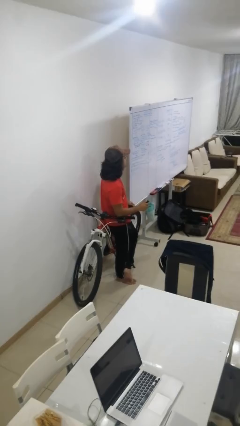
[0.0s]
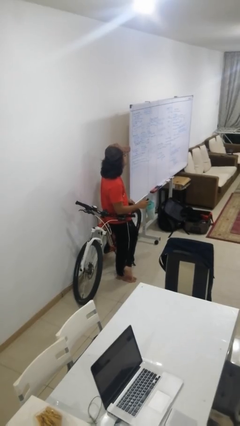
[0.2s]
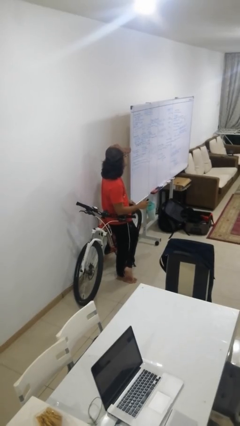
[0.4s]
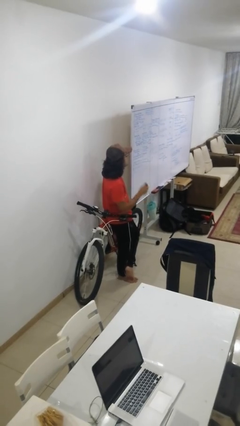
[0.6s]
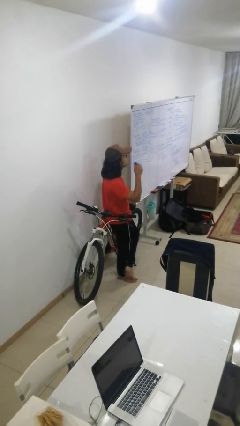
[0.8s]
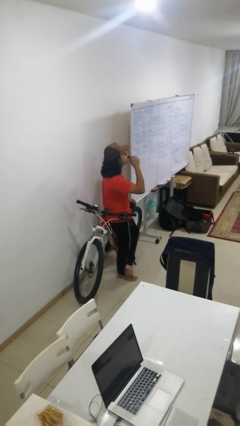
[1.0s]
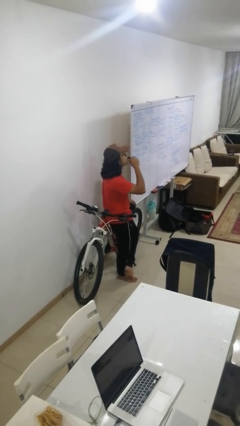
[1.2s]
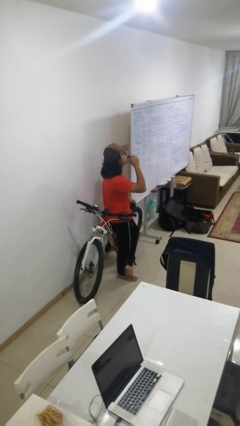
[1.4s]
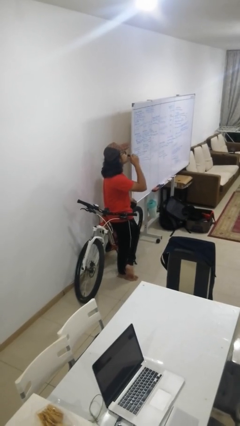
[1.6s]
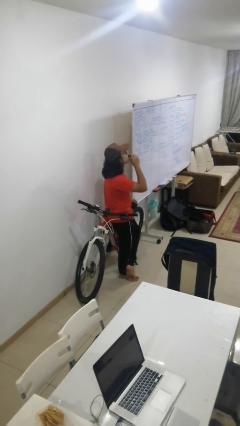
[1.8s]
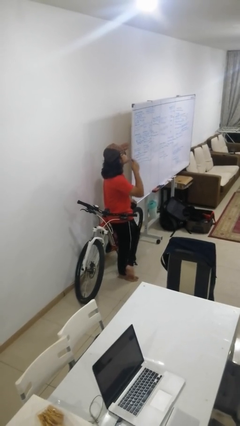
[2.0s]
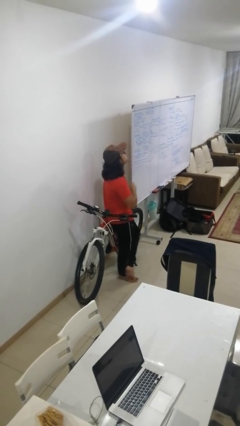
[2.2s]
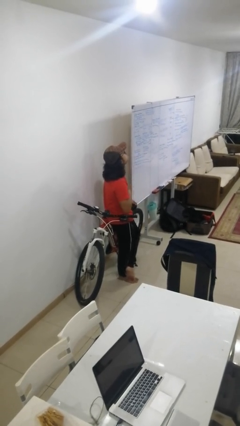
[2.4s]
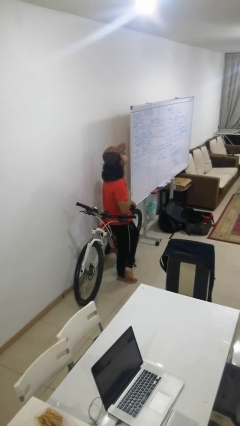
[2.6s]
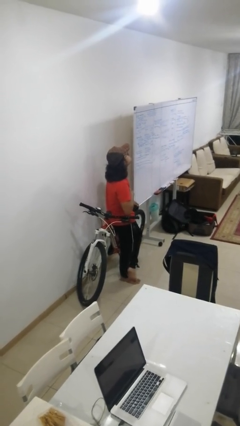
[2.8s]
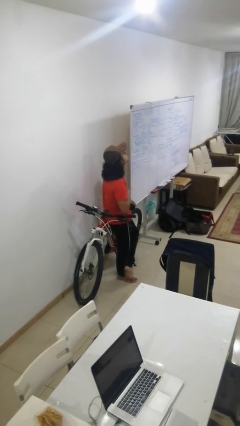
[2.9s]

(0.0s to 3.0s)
person vapes

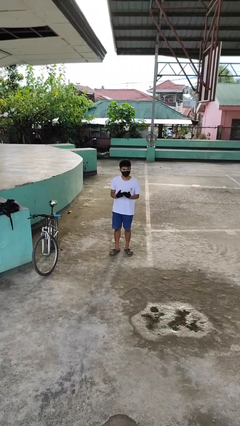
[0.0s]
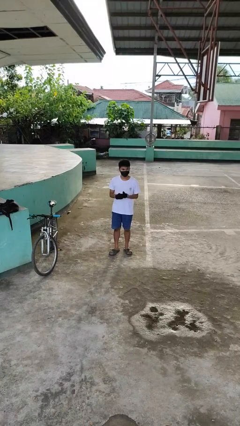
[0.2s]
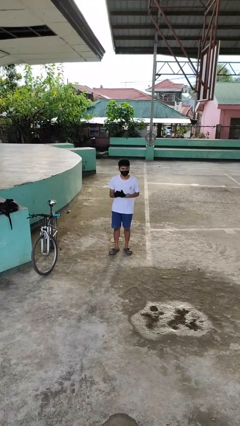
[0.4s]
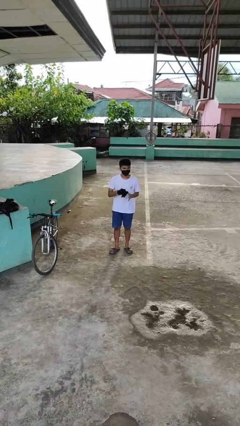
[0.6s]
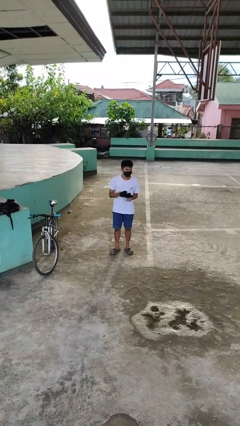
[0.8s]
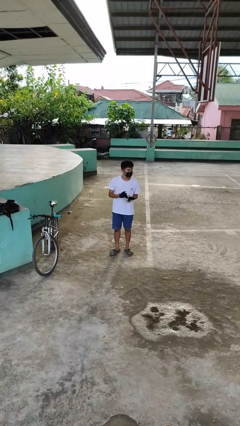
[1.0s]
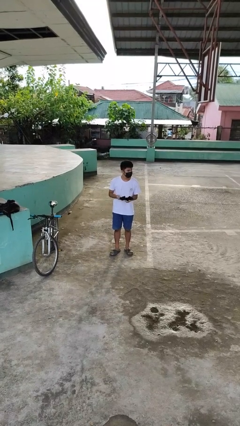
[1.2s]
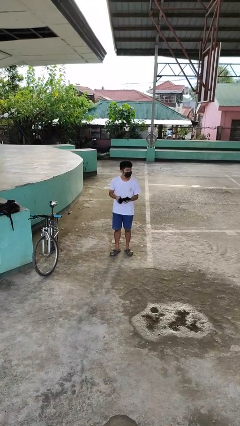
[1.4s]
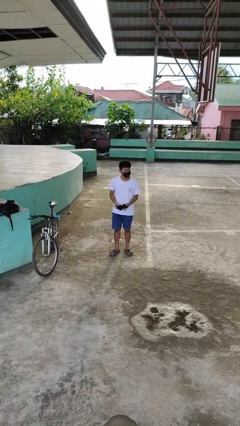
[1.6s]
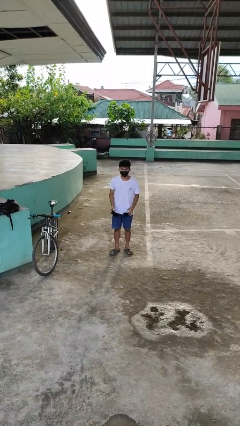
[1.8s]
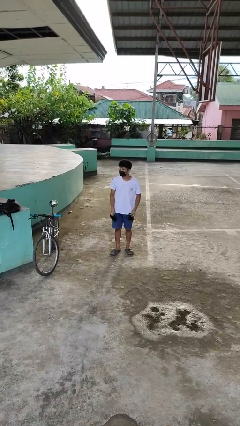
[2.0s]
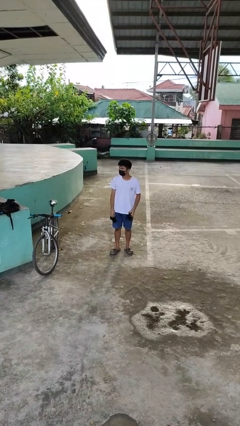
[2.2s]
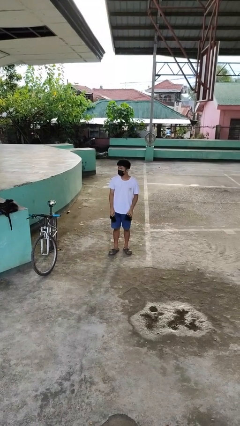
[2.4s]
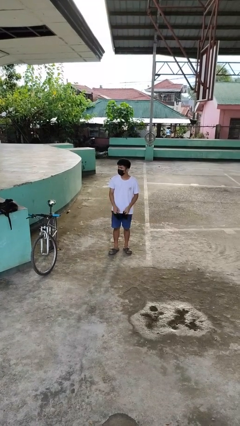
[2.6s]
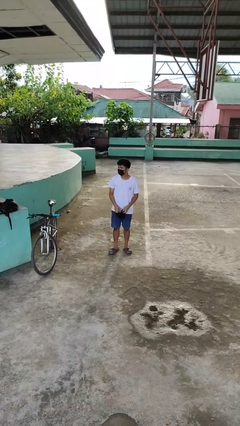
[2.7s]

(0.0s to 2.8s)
person takes off gloves

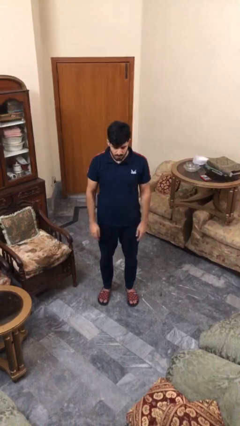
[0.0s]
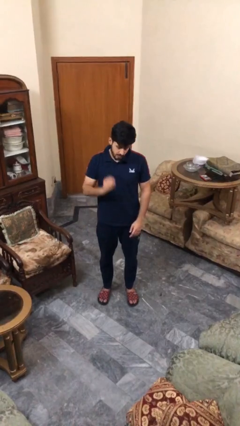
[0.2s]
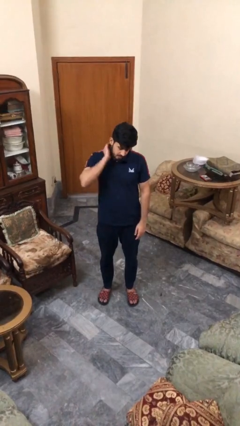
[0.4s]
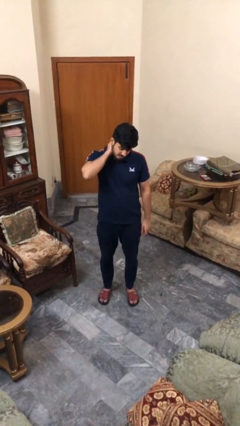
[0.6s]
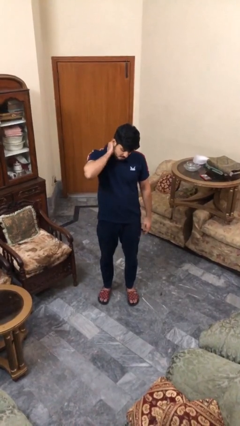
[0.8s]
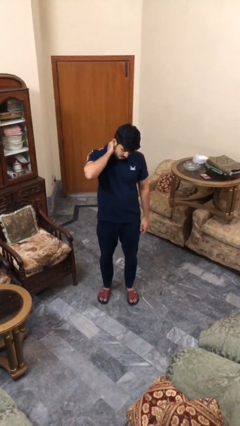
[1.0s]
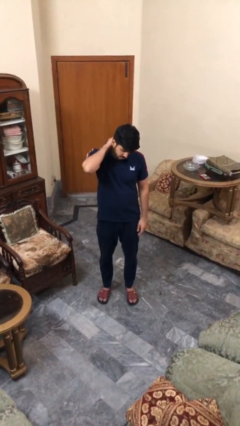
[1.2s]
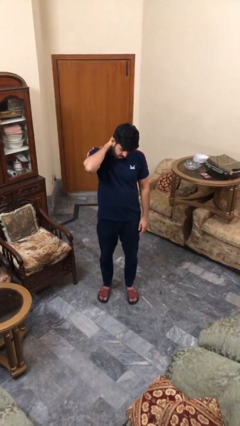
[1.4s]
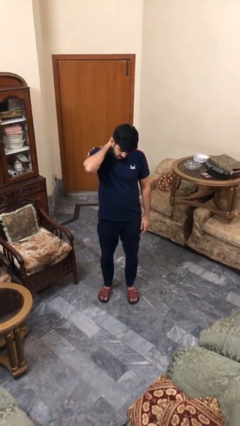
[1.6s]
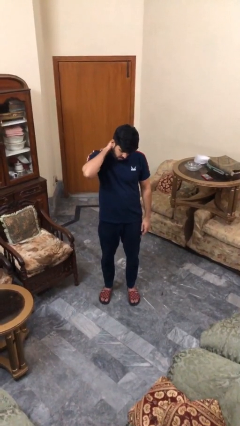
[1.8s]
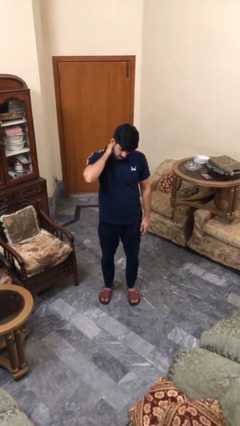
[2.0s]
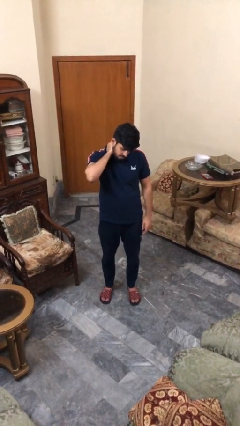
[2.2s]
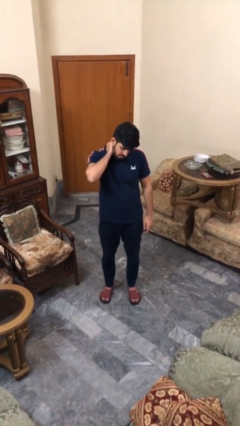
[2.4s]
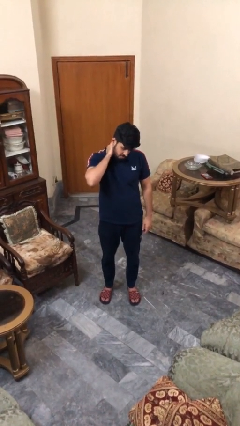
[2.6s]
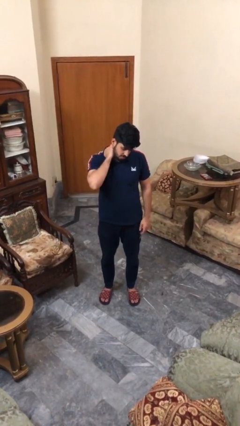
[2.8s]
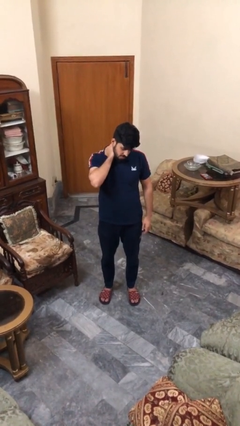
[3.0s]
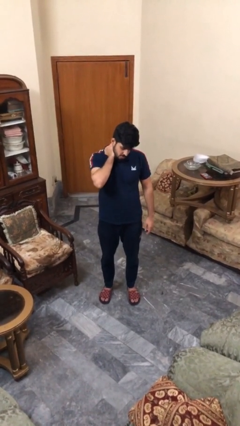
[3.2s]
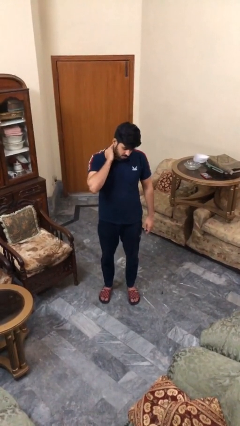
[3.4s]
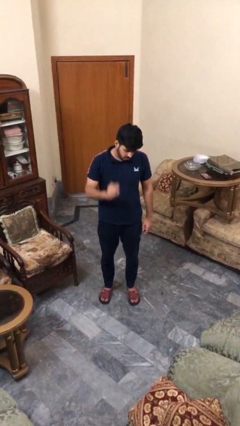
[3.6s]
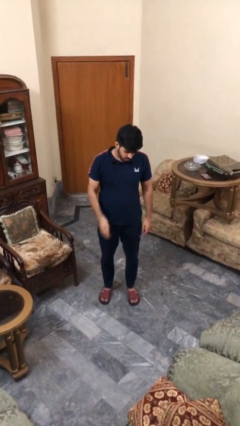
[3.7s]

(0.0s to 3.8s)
person rubs neck

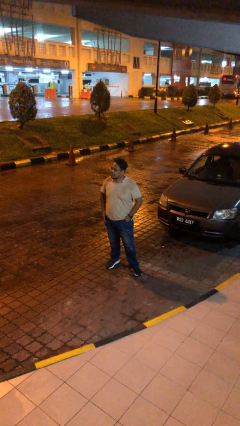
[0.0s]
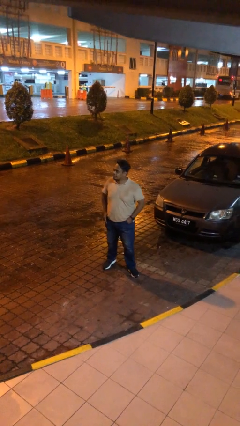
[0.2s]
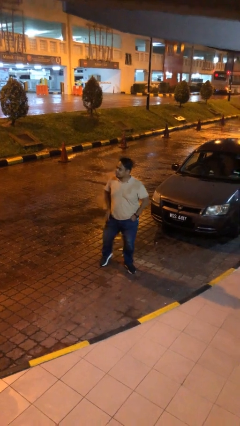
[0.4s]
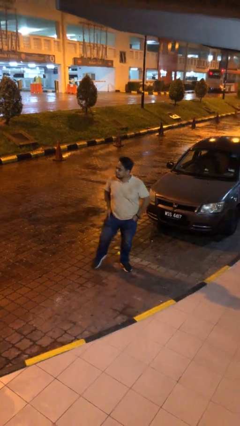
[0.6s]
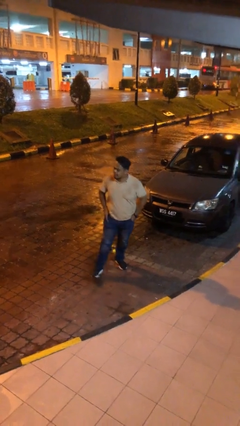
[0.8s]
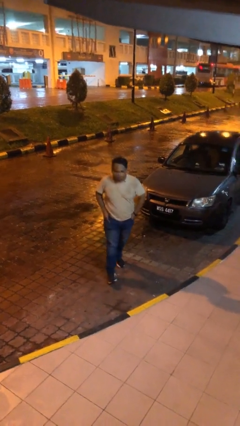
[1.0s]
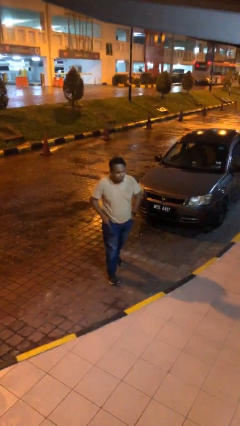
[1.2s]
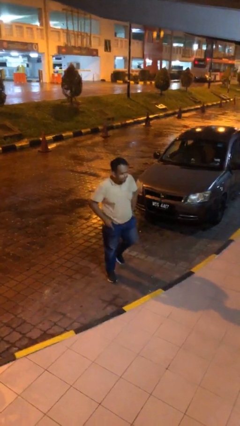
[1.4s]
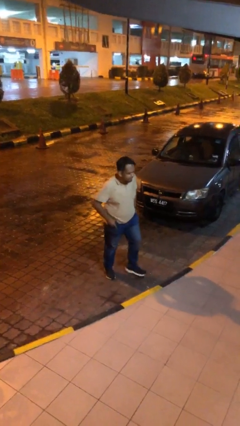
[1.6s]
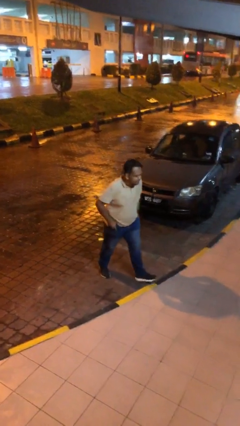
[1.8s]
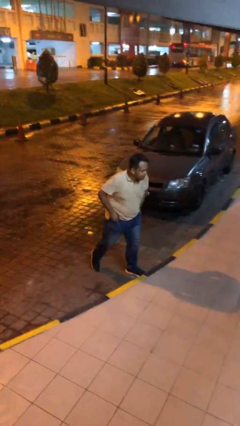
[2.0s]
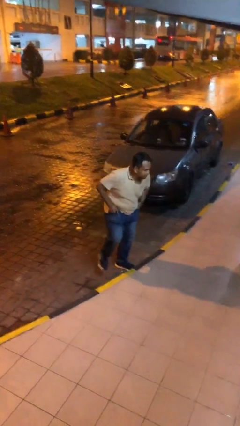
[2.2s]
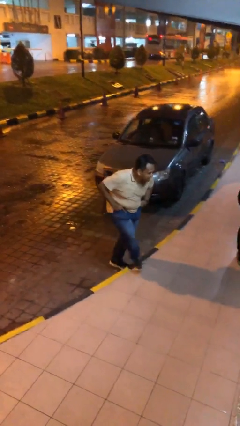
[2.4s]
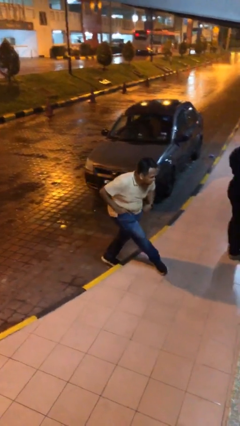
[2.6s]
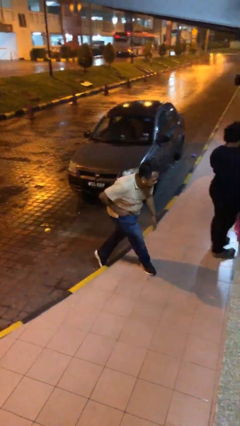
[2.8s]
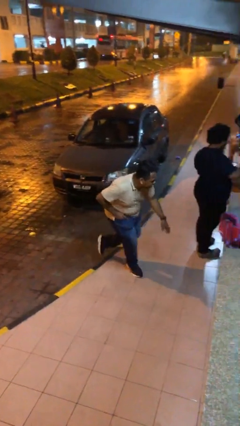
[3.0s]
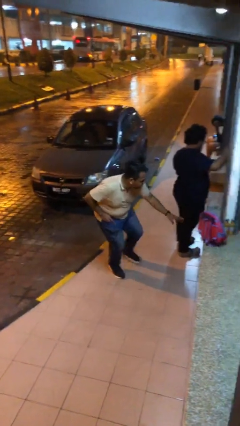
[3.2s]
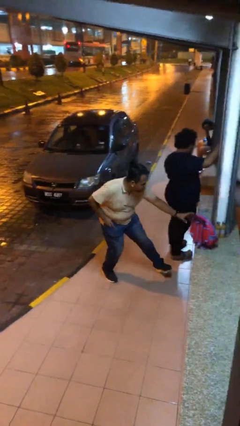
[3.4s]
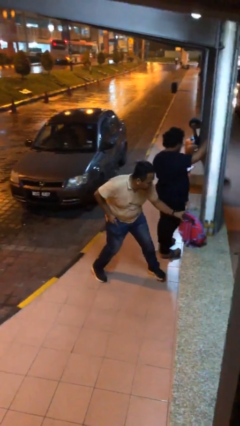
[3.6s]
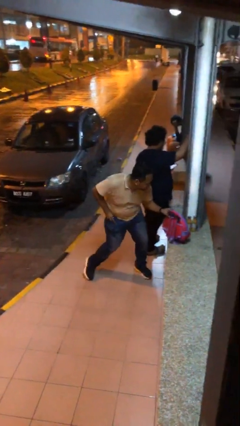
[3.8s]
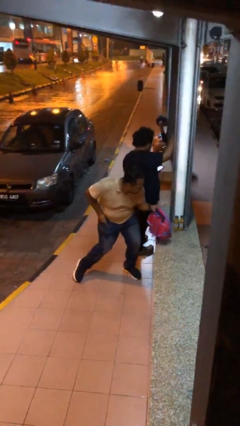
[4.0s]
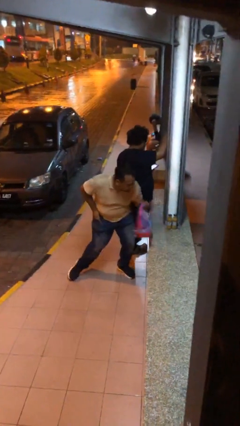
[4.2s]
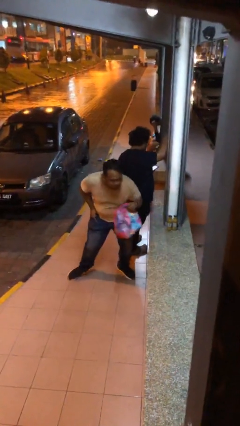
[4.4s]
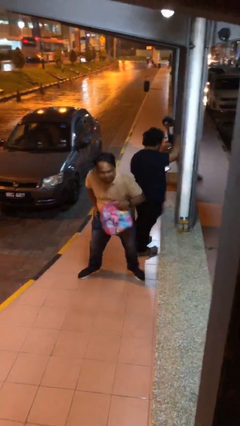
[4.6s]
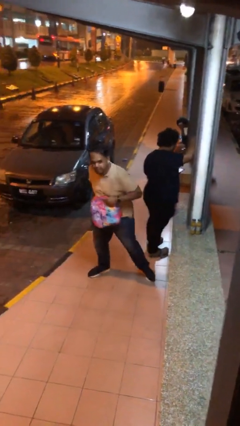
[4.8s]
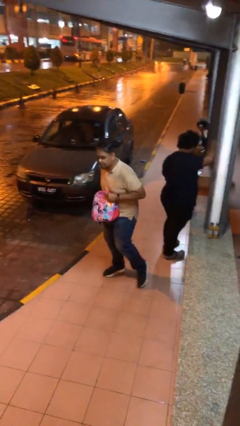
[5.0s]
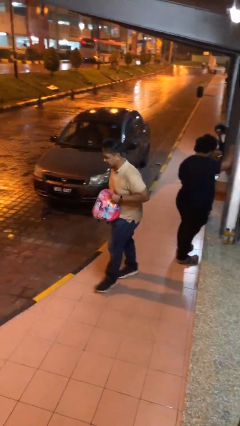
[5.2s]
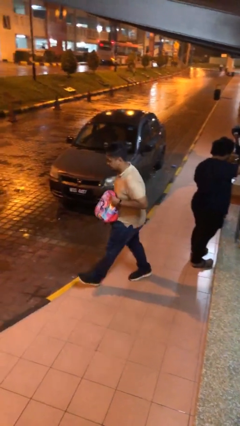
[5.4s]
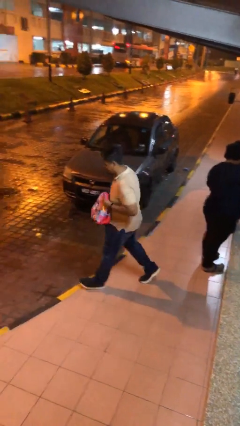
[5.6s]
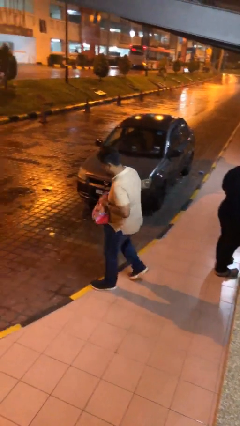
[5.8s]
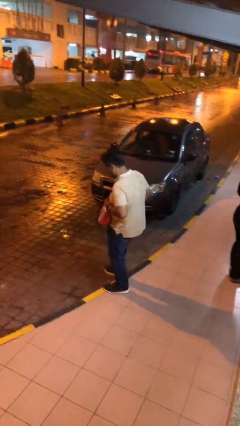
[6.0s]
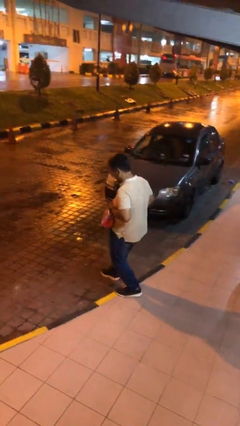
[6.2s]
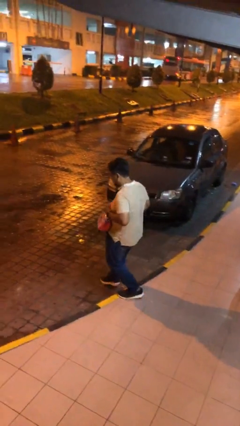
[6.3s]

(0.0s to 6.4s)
person steals object from person

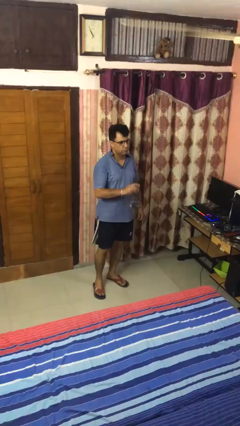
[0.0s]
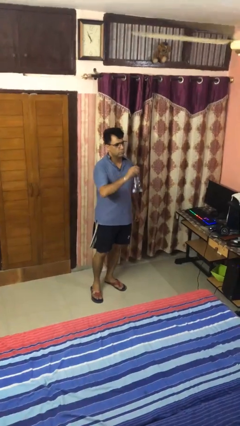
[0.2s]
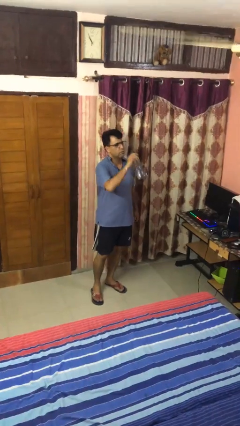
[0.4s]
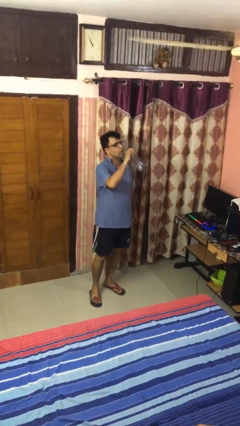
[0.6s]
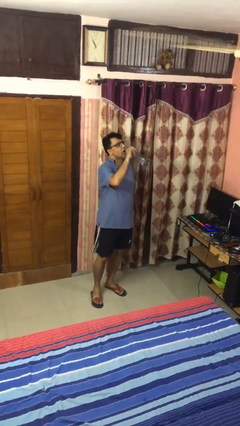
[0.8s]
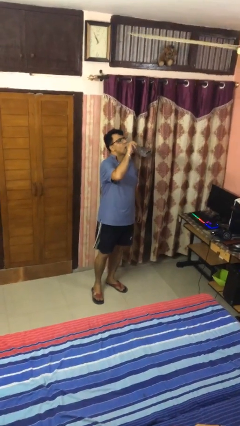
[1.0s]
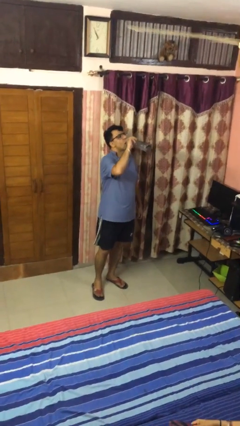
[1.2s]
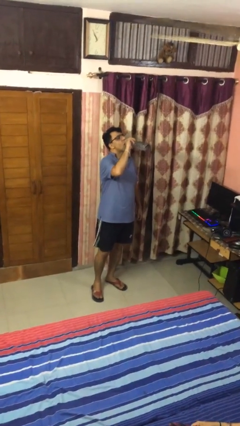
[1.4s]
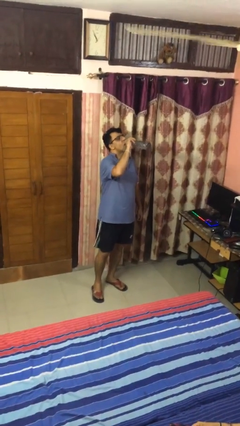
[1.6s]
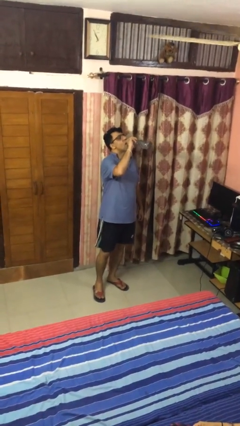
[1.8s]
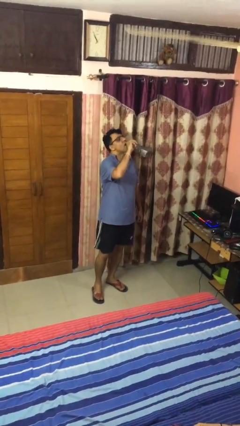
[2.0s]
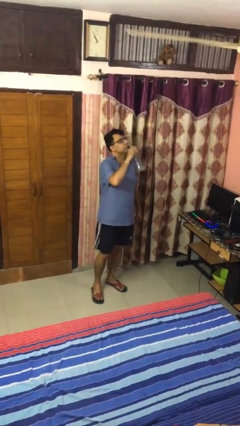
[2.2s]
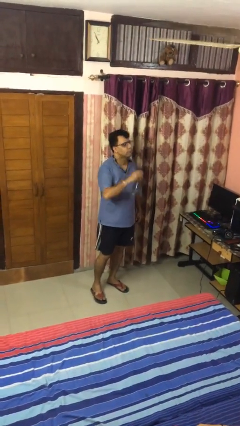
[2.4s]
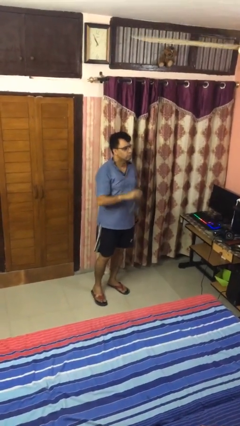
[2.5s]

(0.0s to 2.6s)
person drinks from bottle
